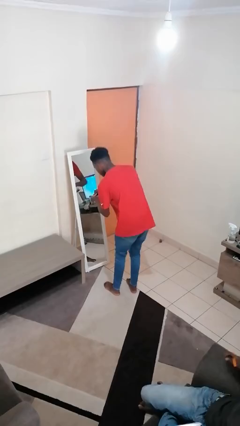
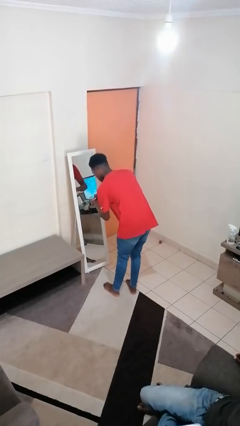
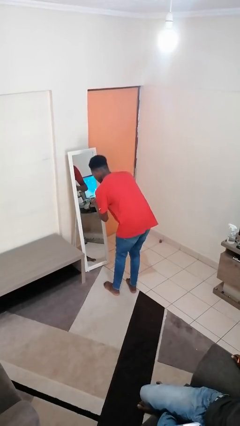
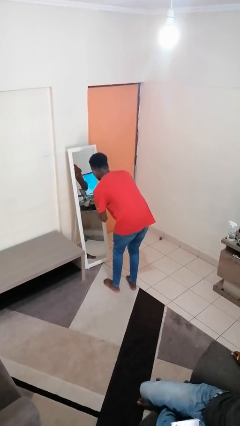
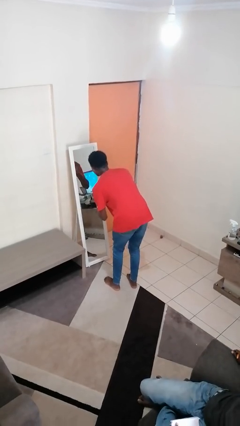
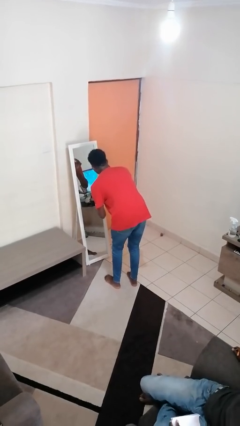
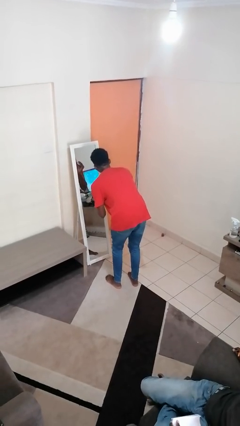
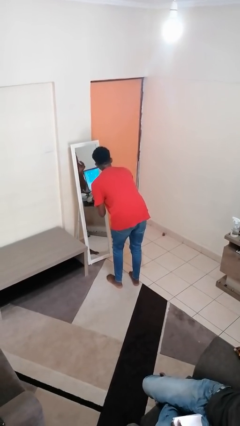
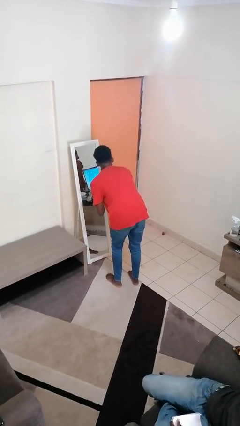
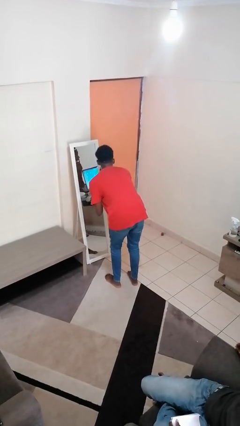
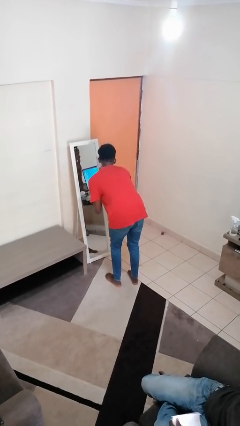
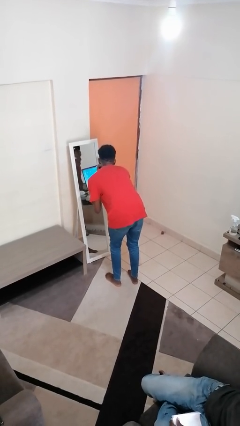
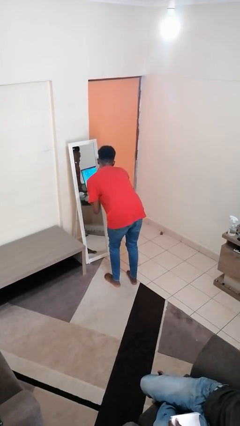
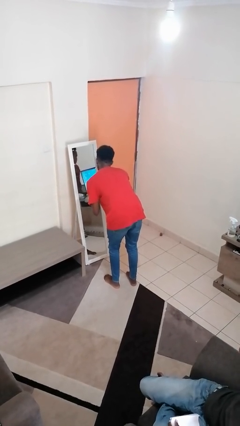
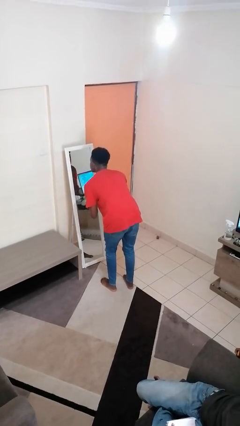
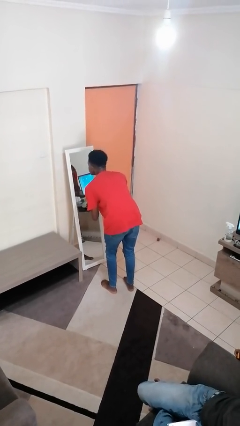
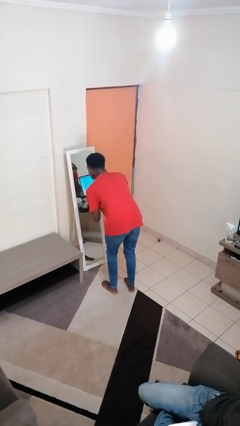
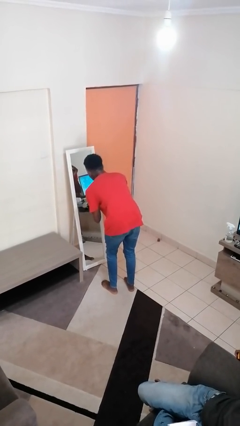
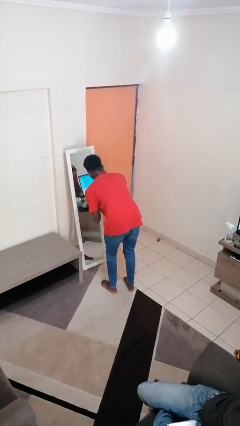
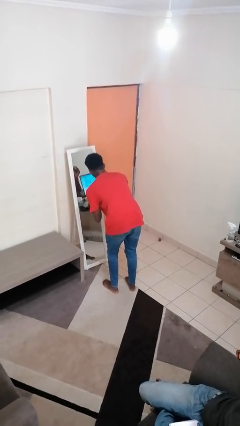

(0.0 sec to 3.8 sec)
person applies foundation makeup

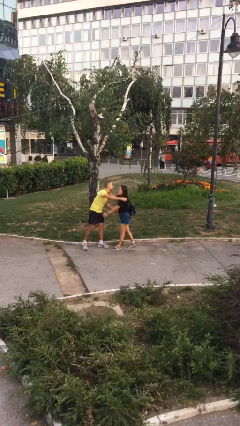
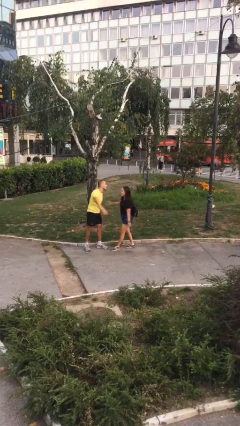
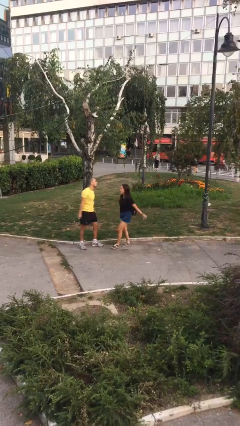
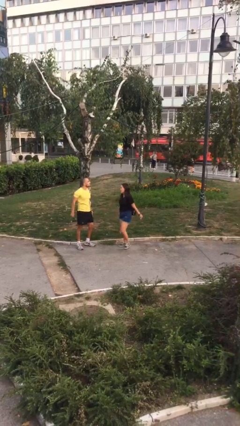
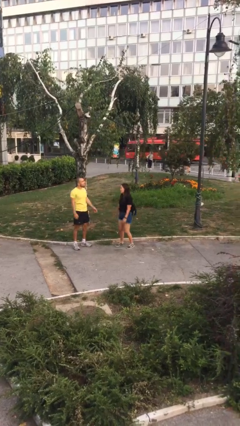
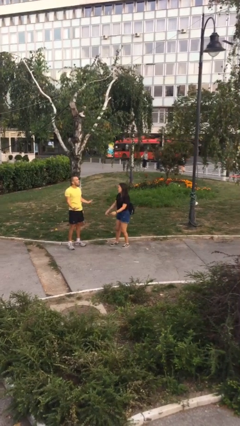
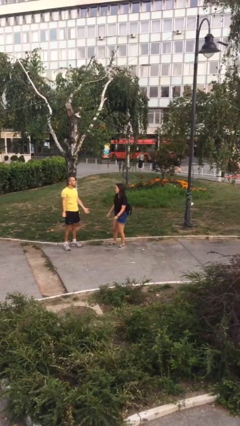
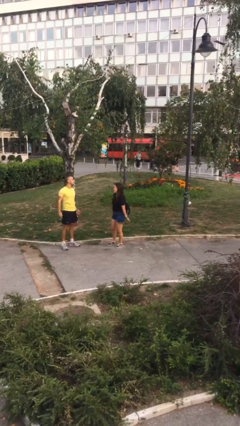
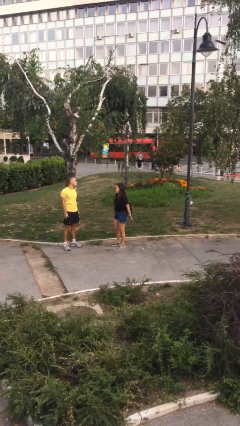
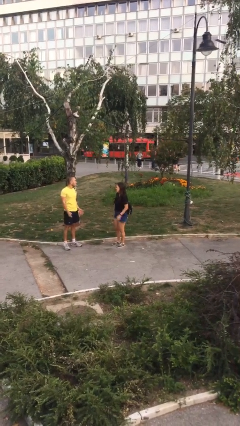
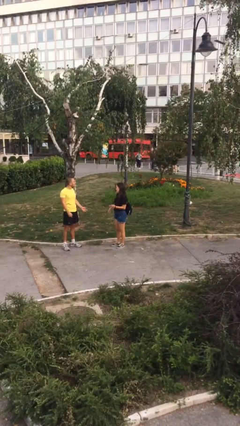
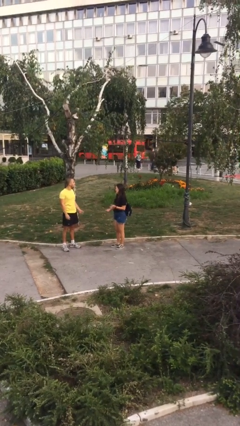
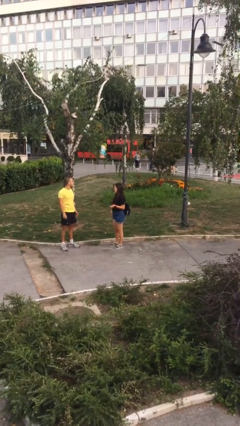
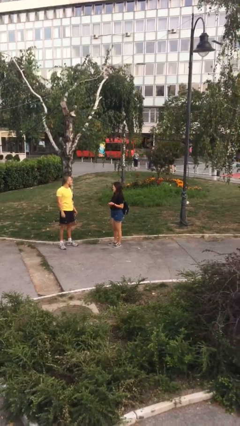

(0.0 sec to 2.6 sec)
person talks to person

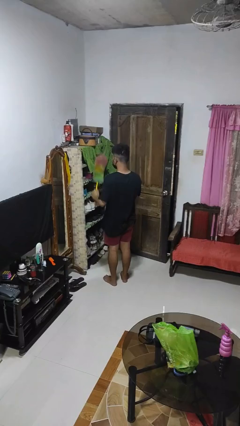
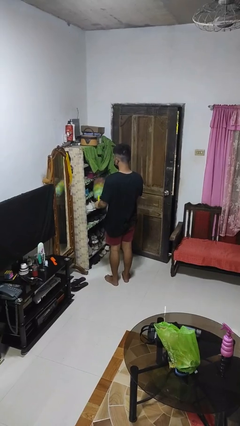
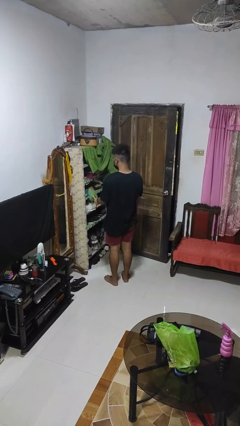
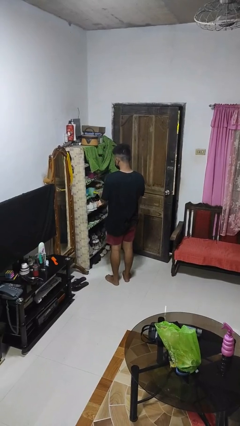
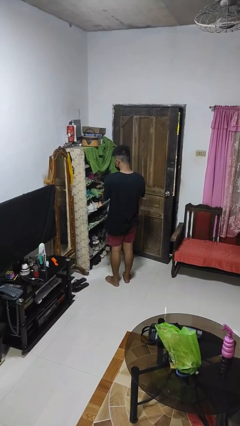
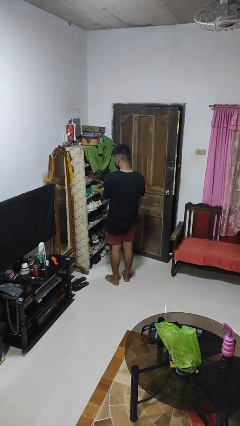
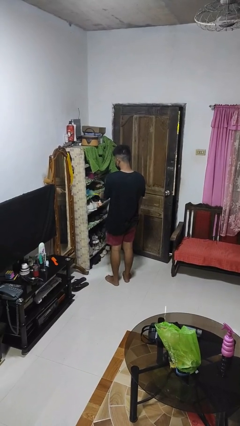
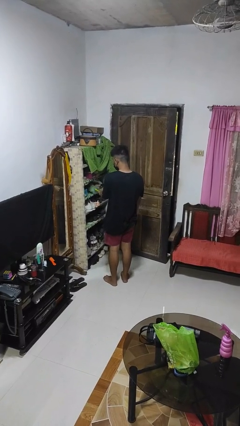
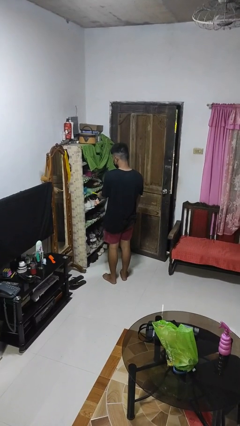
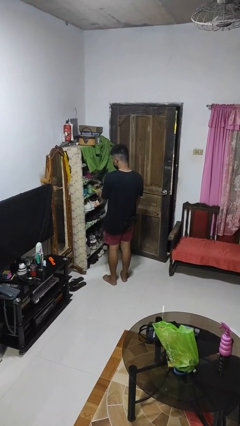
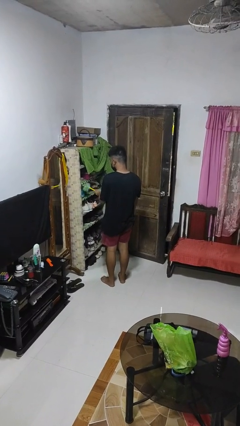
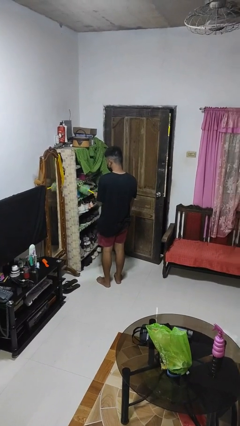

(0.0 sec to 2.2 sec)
person dusts furniture

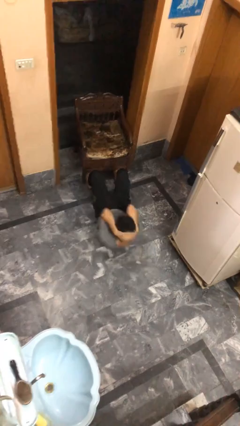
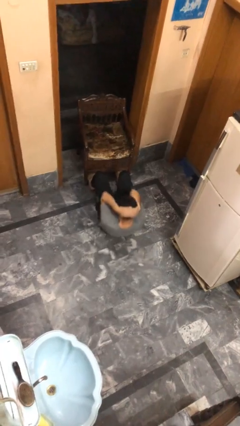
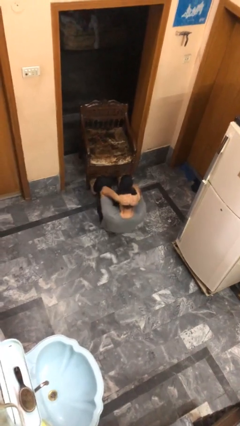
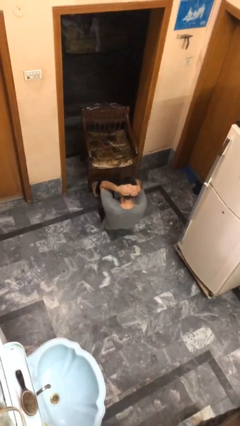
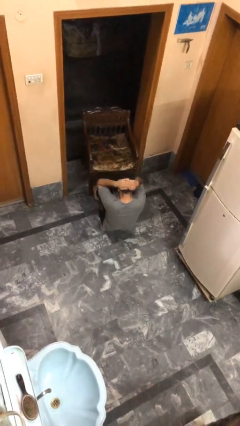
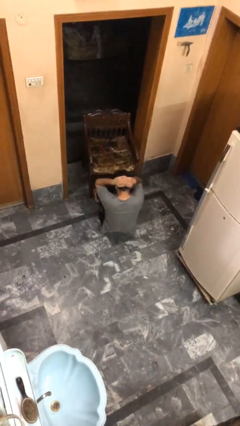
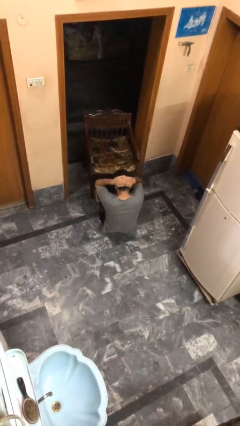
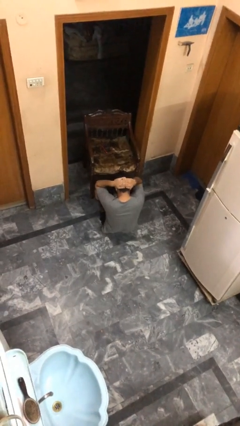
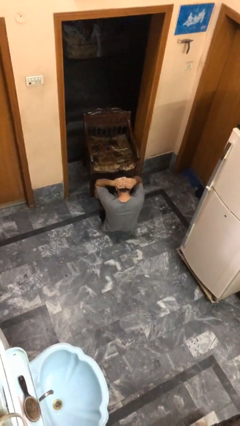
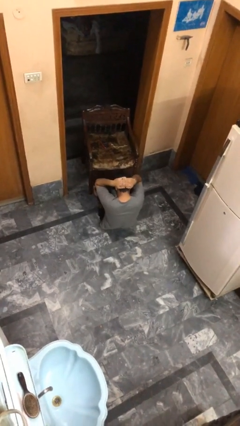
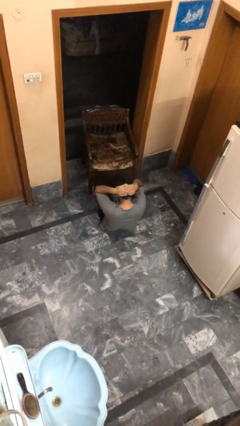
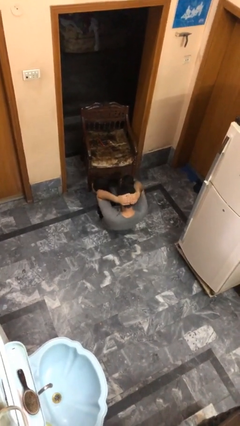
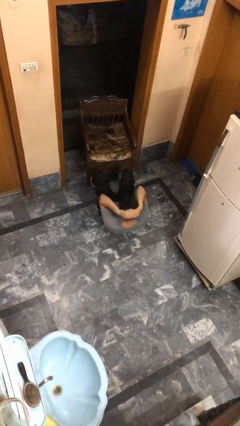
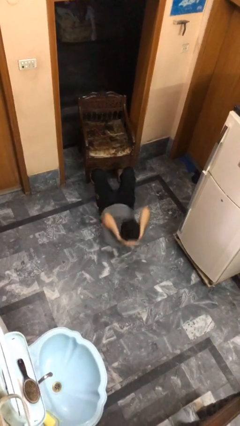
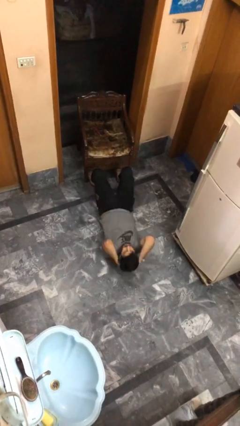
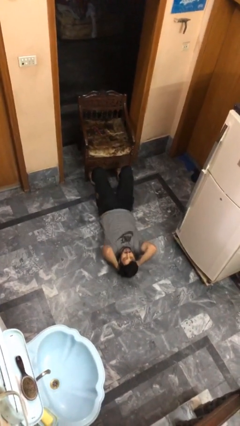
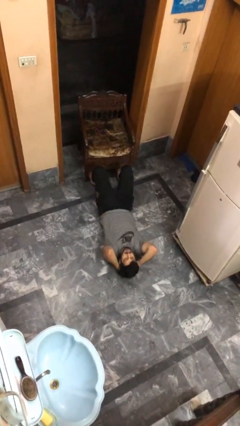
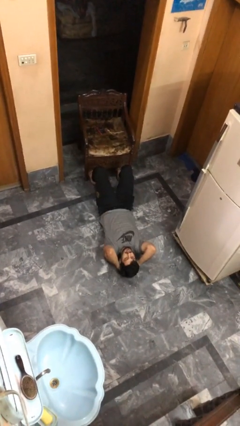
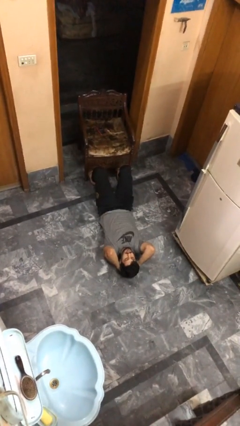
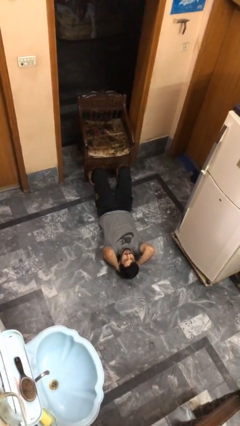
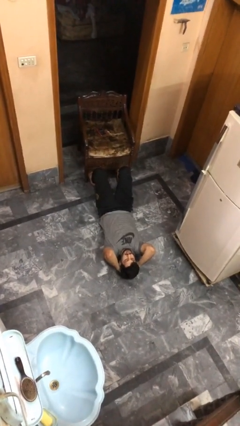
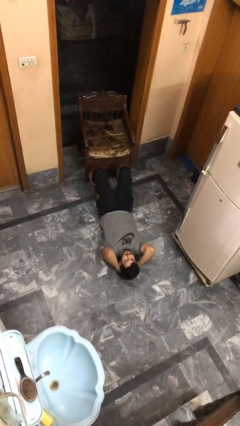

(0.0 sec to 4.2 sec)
person exercises with situp

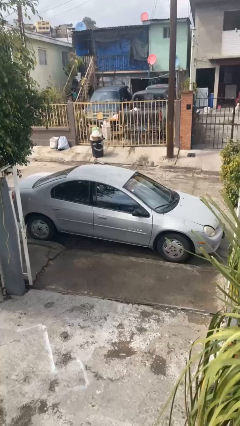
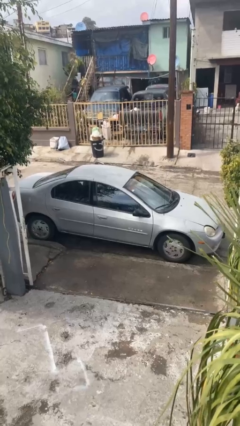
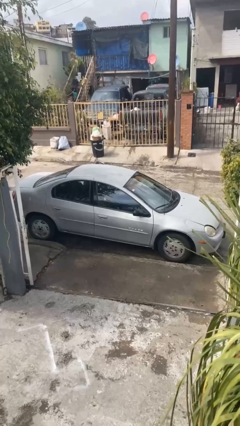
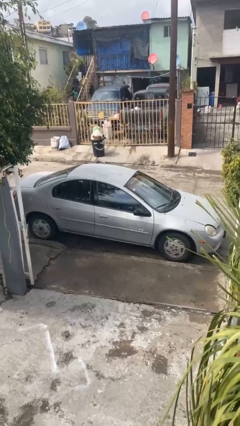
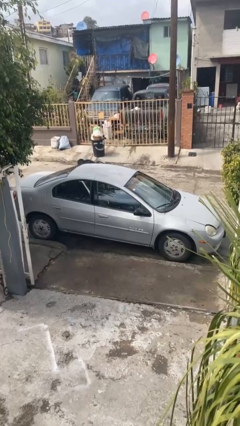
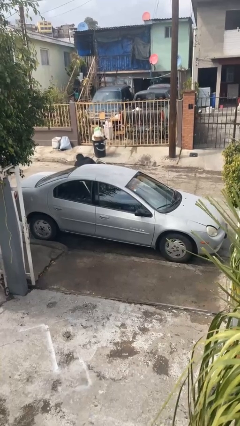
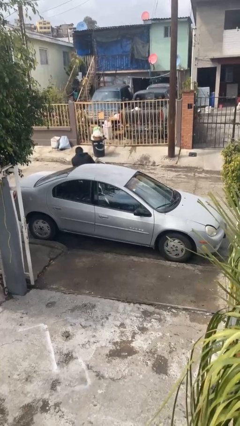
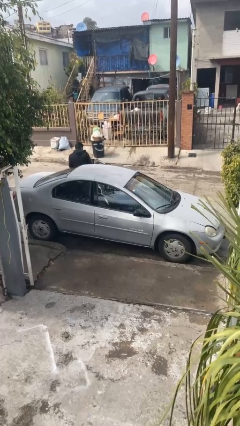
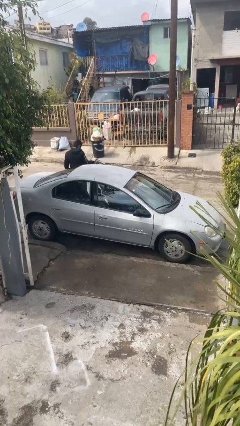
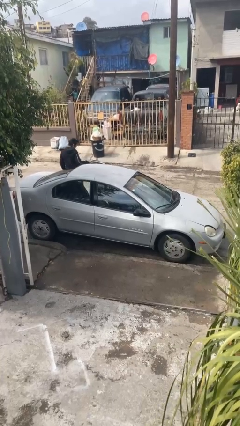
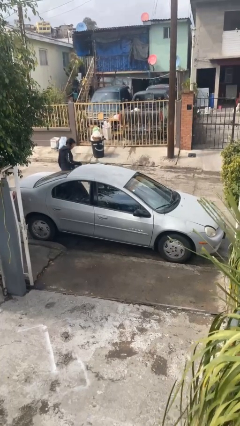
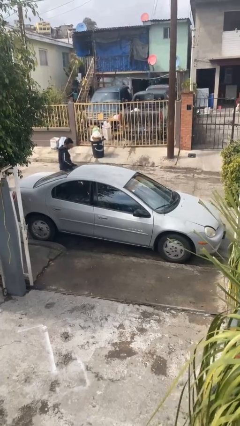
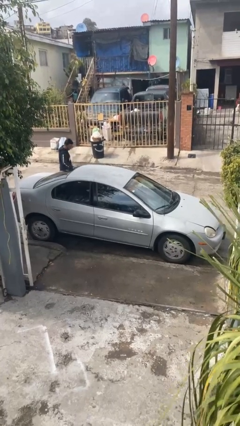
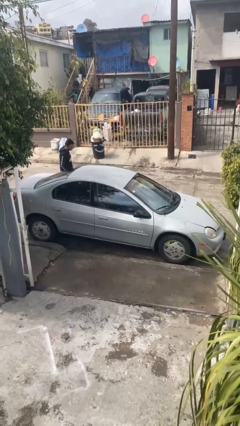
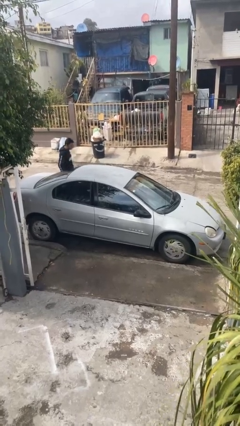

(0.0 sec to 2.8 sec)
car drops off person

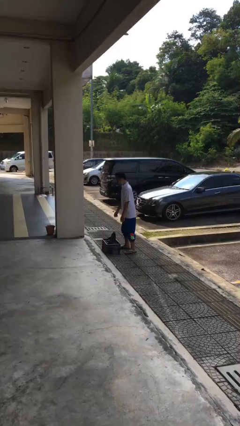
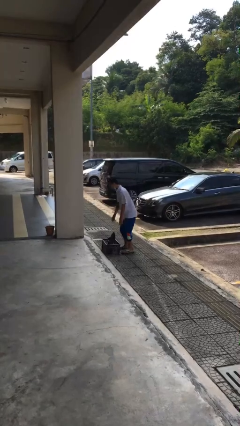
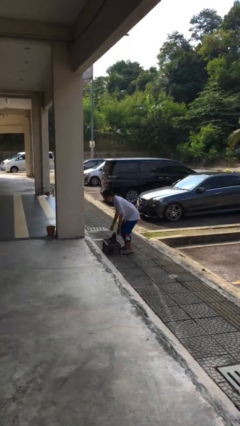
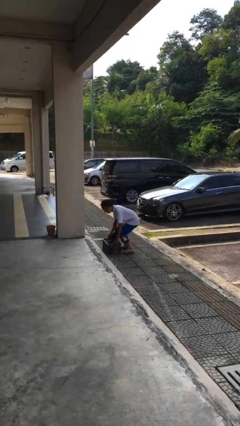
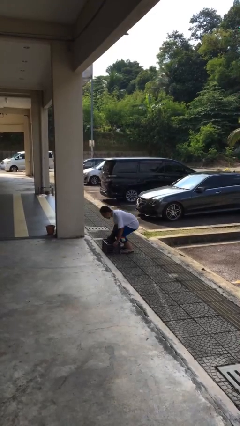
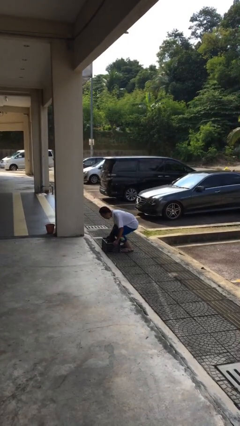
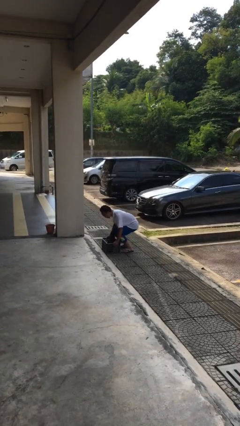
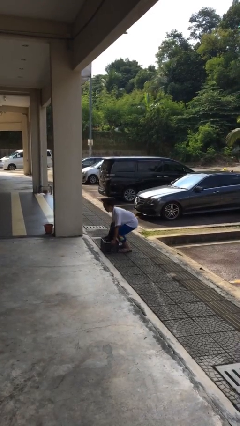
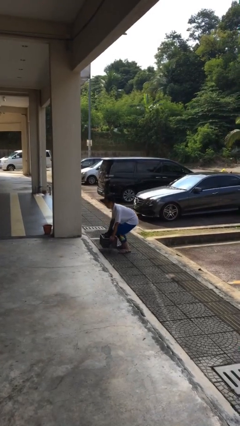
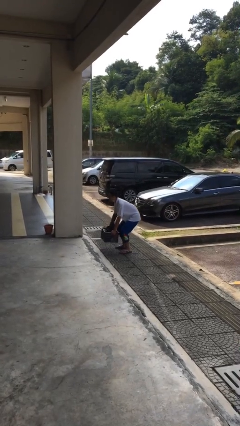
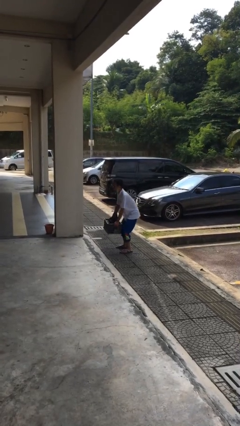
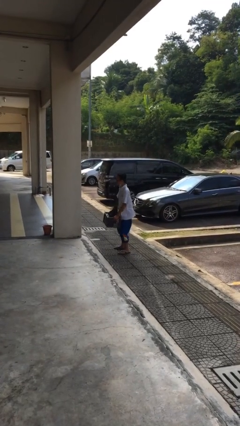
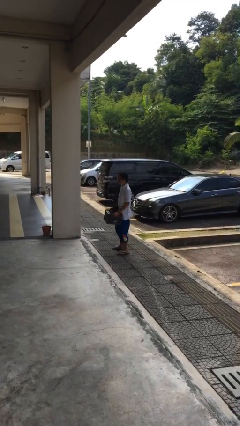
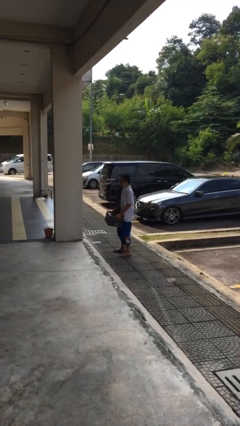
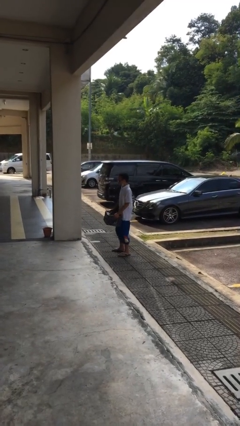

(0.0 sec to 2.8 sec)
person picks up object from floor
